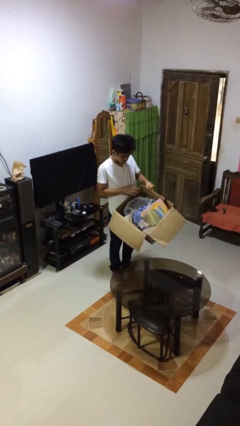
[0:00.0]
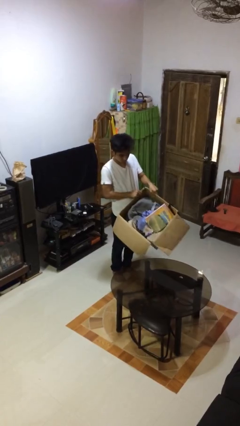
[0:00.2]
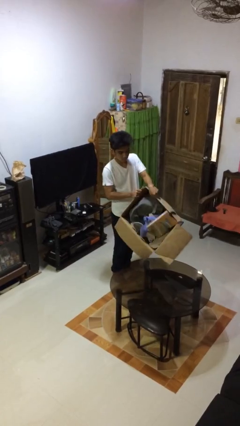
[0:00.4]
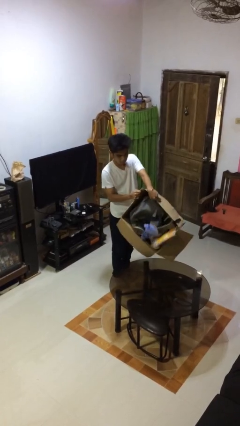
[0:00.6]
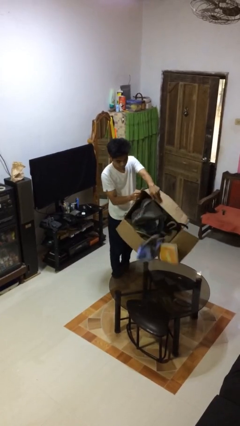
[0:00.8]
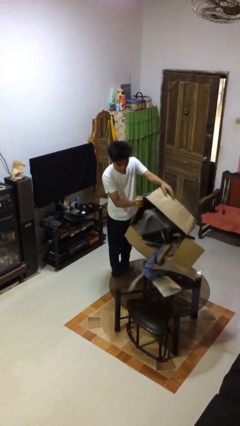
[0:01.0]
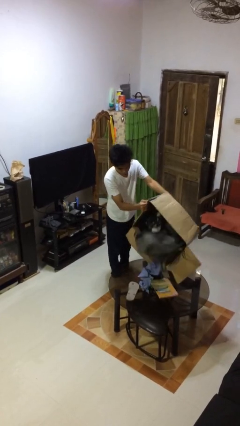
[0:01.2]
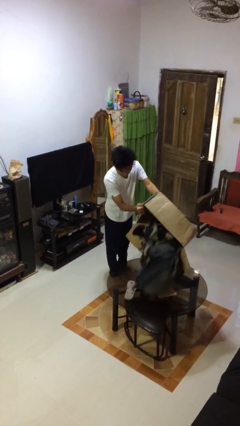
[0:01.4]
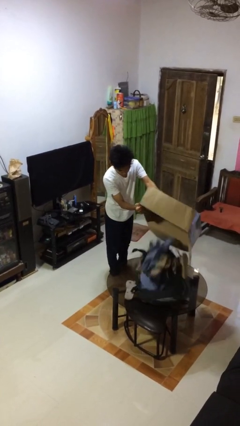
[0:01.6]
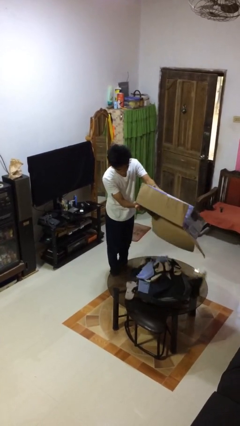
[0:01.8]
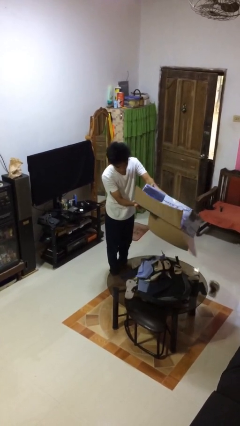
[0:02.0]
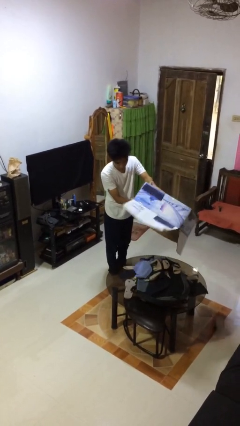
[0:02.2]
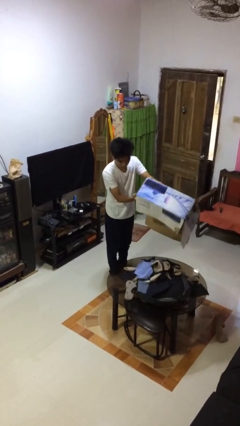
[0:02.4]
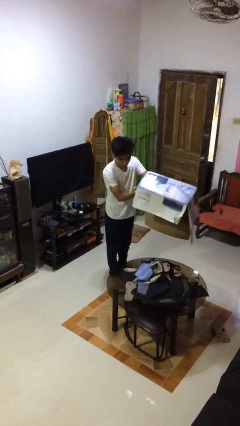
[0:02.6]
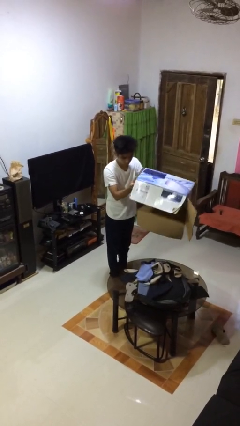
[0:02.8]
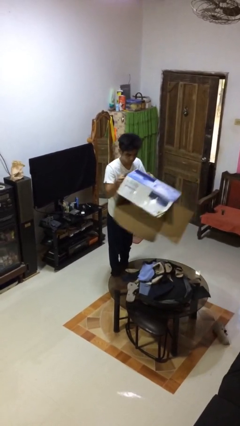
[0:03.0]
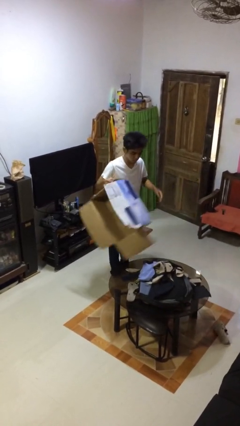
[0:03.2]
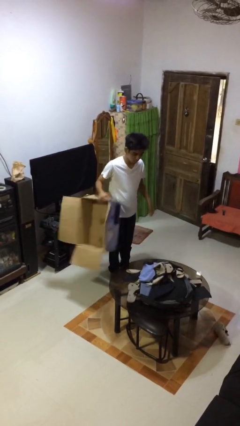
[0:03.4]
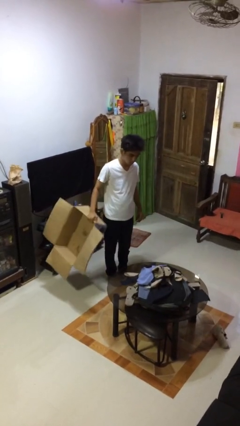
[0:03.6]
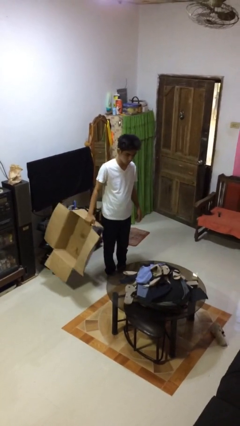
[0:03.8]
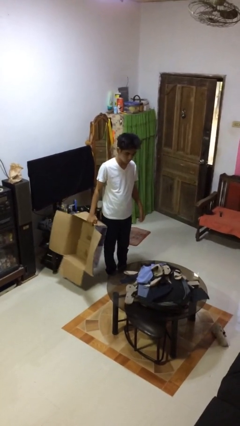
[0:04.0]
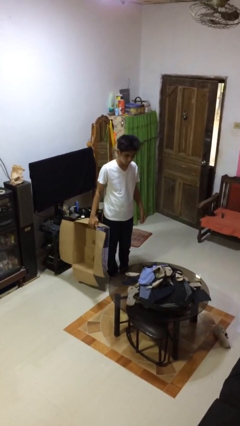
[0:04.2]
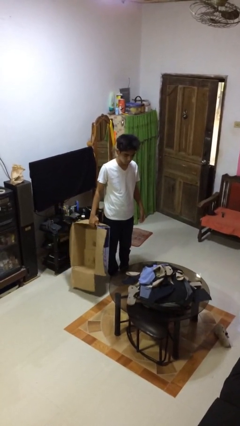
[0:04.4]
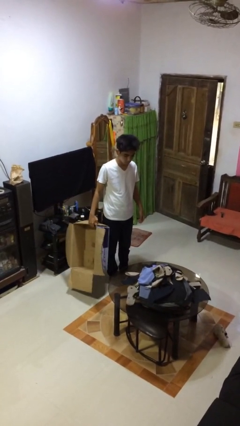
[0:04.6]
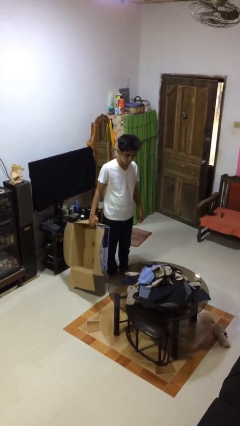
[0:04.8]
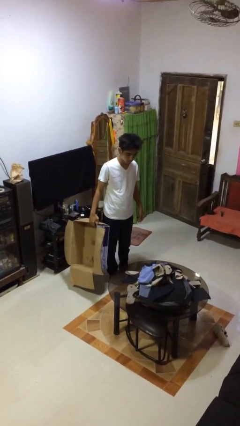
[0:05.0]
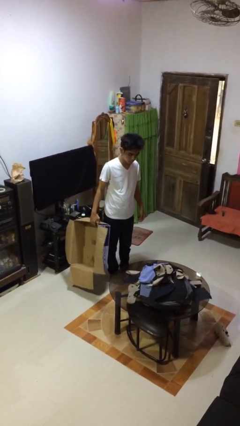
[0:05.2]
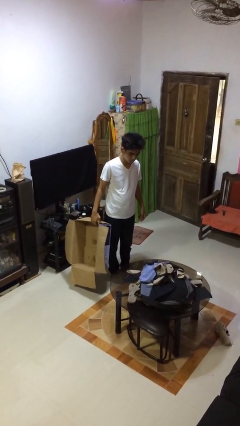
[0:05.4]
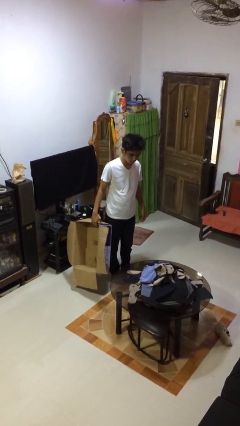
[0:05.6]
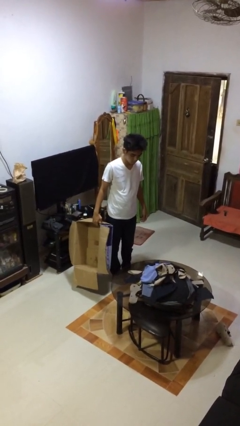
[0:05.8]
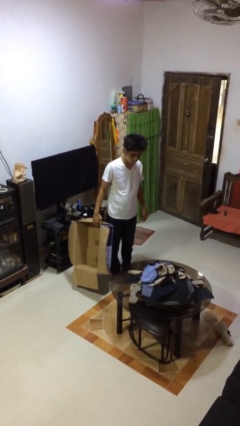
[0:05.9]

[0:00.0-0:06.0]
person unloads box onto table

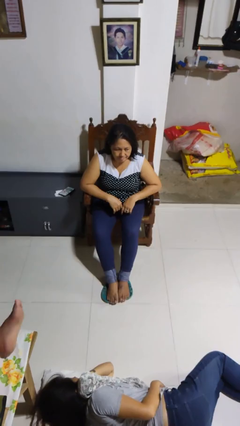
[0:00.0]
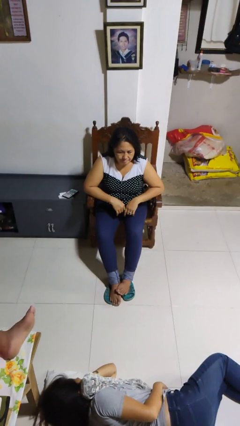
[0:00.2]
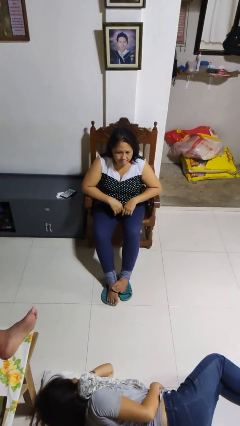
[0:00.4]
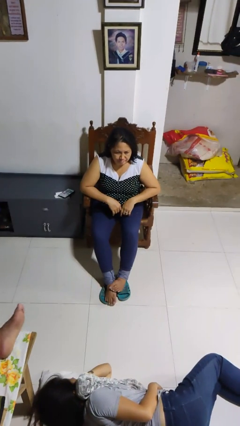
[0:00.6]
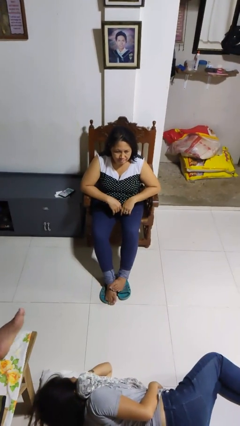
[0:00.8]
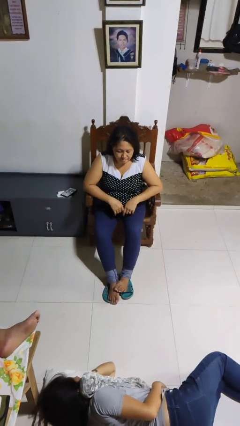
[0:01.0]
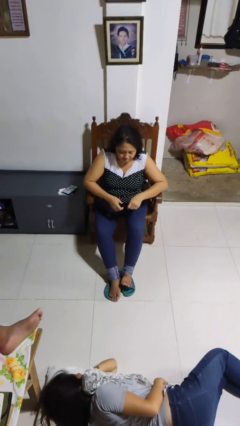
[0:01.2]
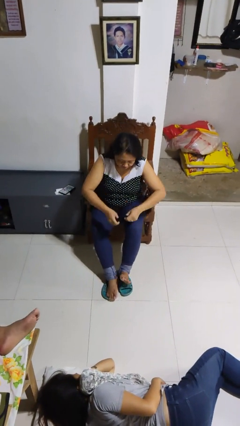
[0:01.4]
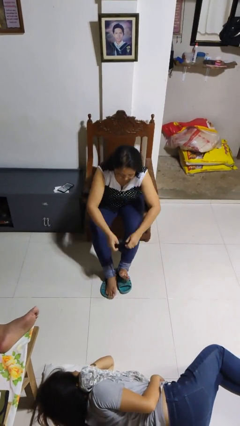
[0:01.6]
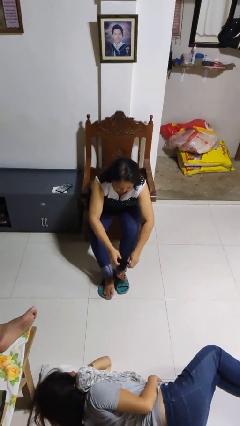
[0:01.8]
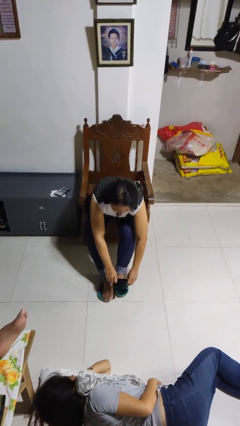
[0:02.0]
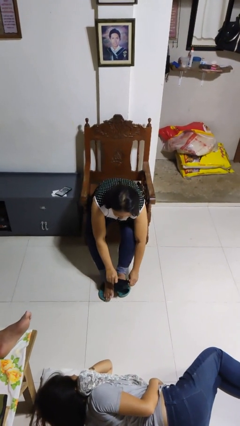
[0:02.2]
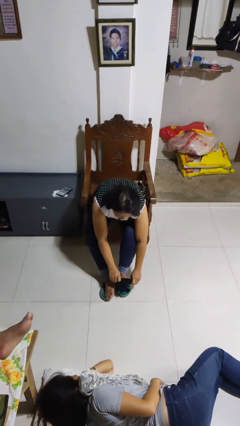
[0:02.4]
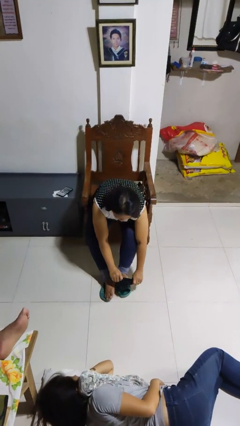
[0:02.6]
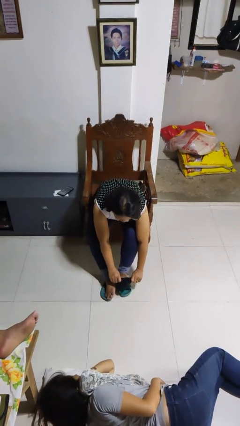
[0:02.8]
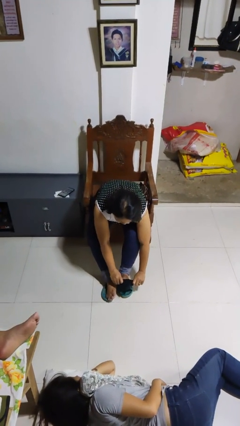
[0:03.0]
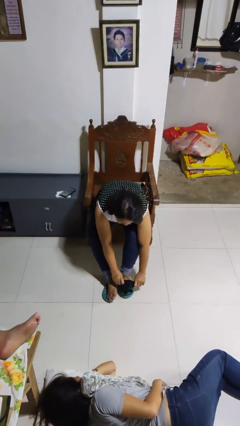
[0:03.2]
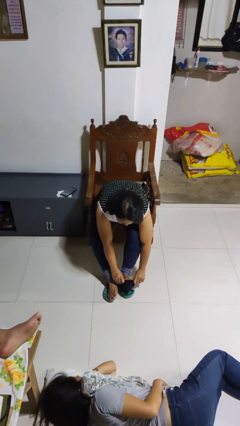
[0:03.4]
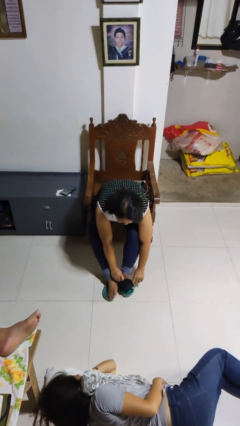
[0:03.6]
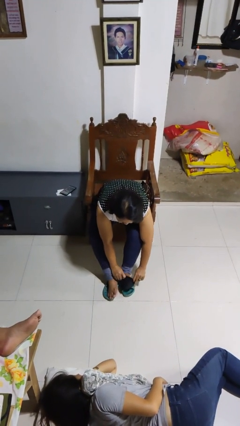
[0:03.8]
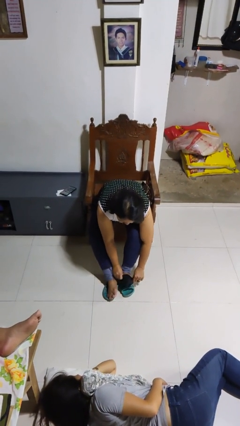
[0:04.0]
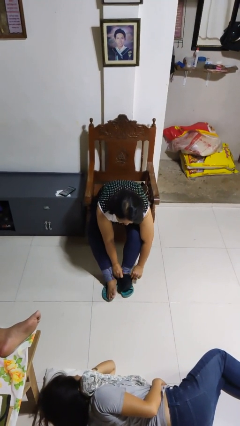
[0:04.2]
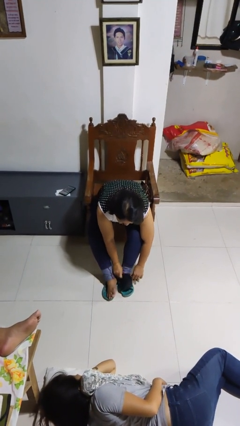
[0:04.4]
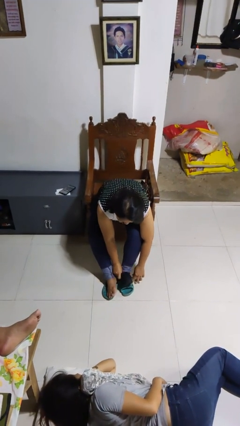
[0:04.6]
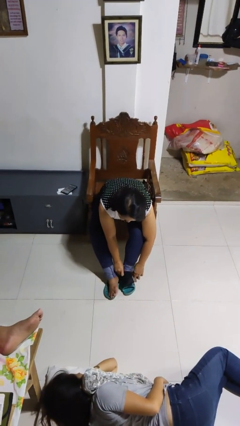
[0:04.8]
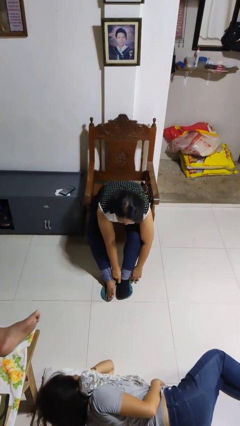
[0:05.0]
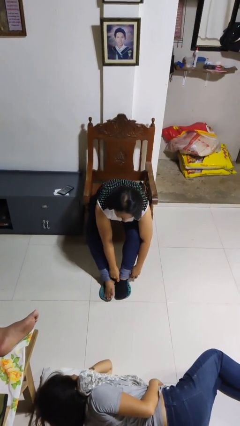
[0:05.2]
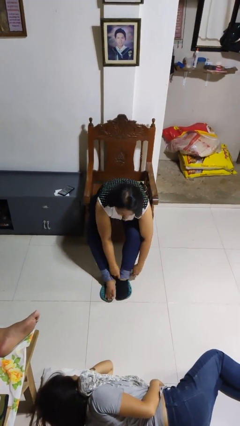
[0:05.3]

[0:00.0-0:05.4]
person puts on socks

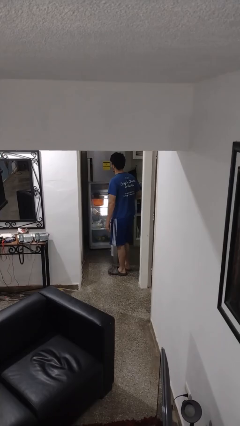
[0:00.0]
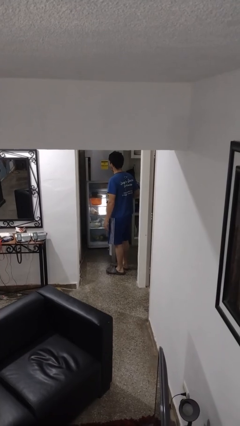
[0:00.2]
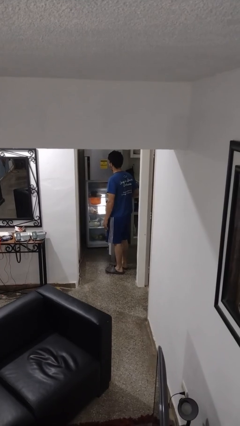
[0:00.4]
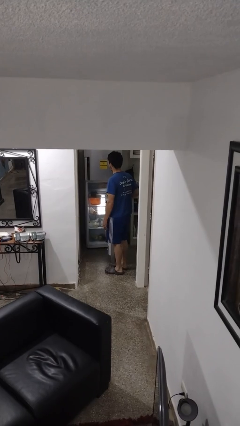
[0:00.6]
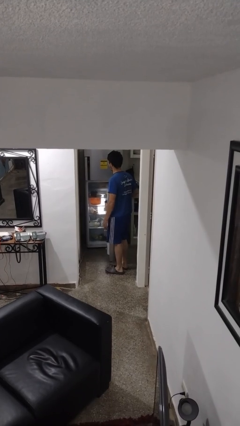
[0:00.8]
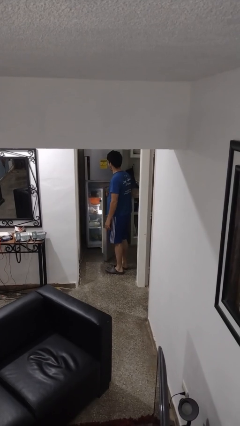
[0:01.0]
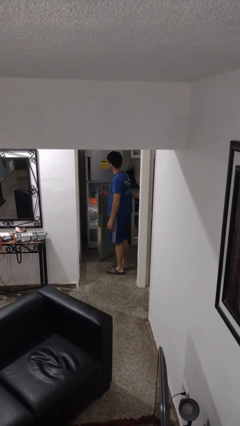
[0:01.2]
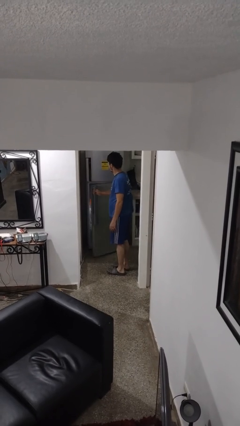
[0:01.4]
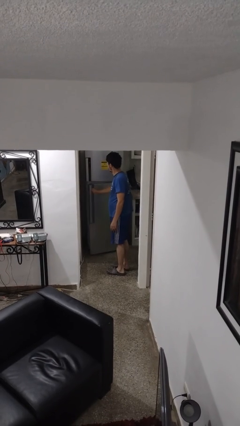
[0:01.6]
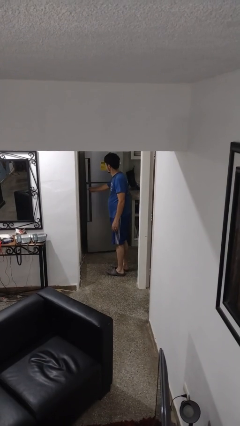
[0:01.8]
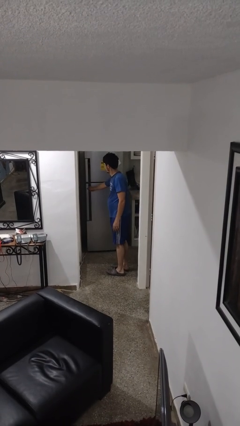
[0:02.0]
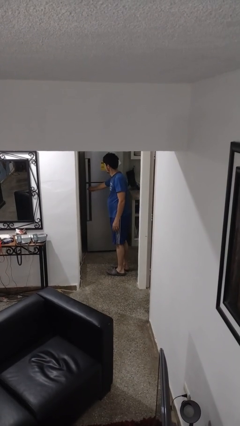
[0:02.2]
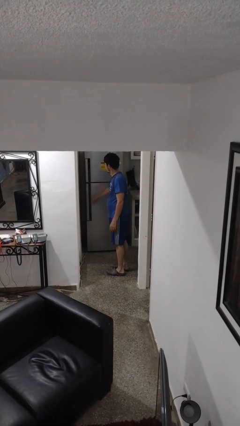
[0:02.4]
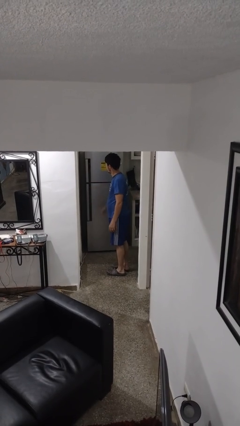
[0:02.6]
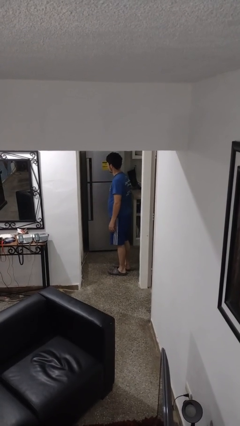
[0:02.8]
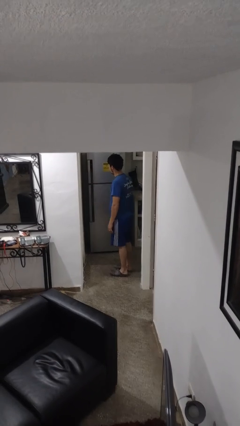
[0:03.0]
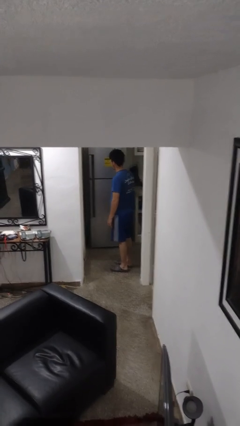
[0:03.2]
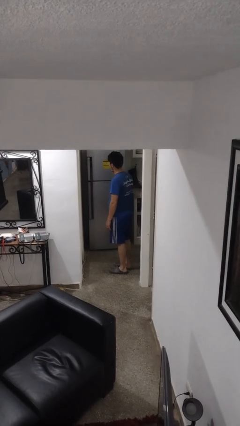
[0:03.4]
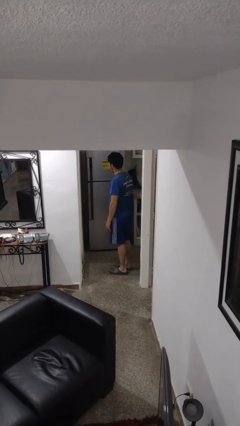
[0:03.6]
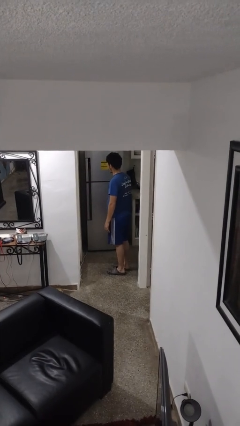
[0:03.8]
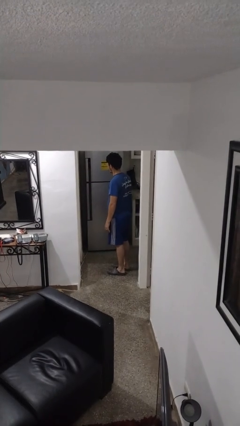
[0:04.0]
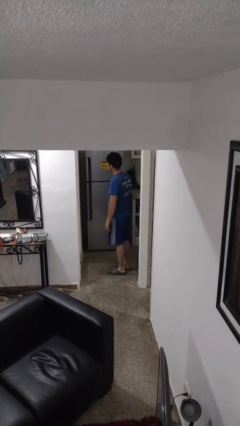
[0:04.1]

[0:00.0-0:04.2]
person closes refrigerator

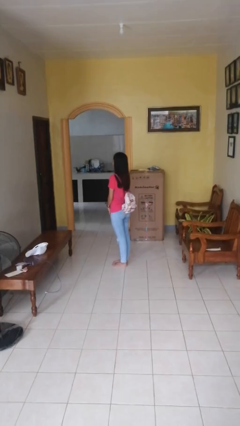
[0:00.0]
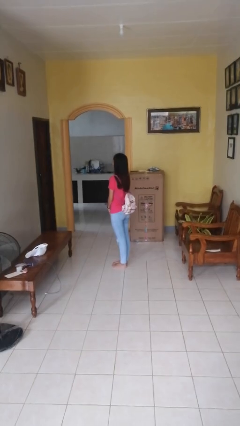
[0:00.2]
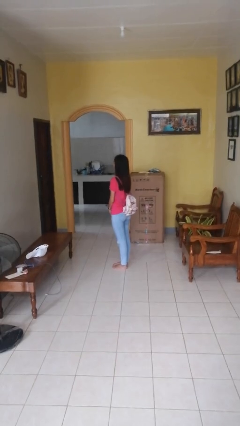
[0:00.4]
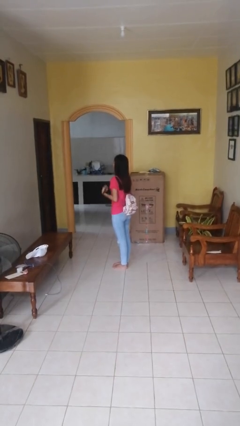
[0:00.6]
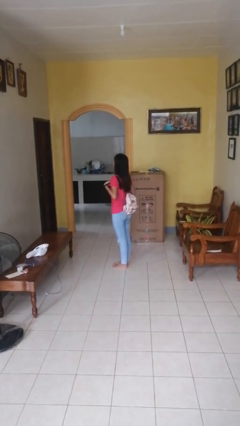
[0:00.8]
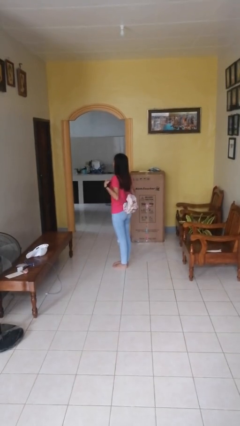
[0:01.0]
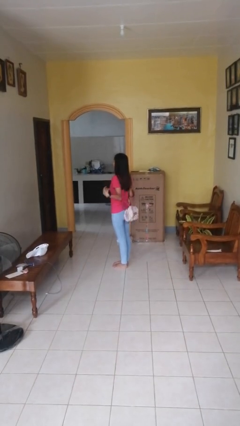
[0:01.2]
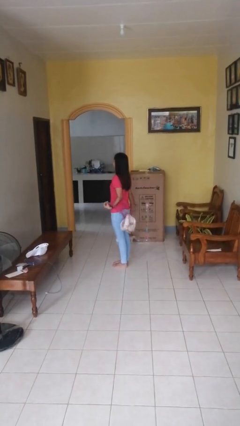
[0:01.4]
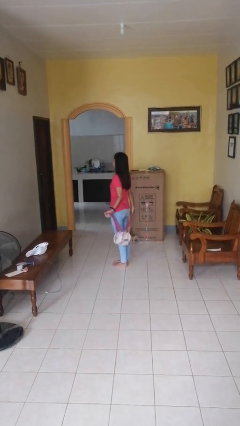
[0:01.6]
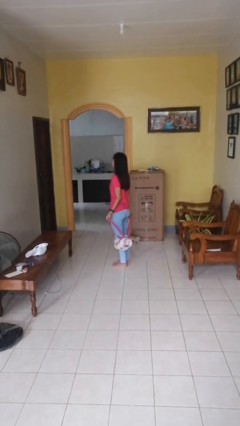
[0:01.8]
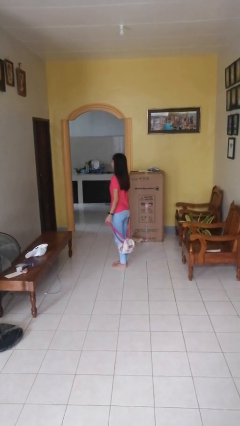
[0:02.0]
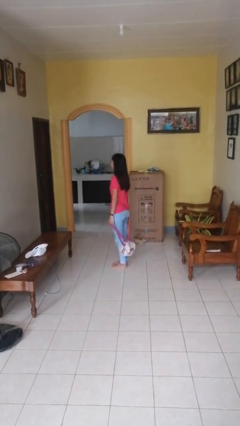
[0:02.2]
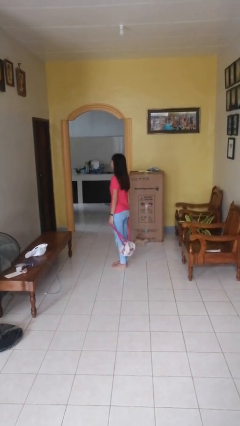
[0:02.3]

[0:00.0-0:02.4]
person takes off backpack
